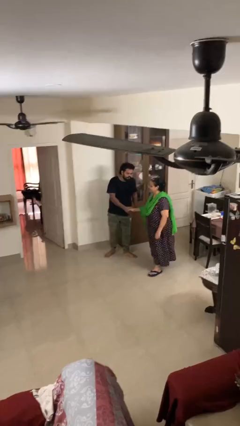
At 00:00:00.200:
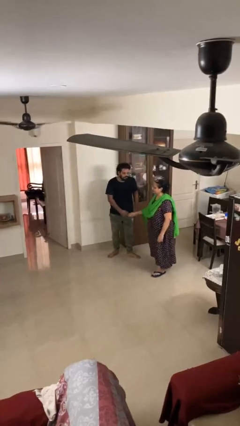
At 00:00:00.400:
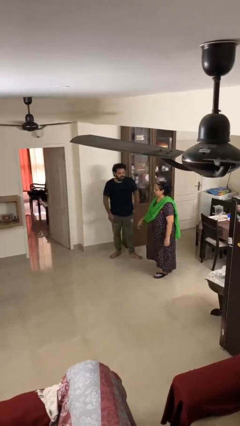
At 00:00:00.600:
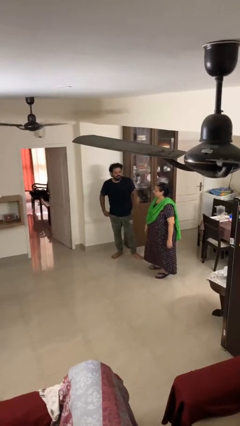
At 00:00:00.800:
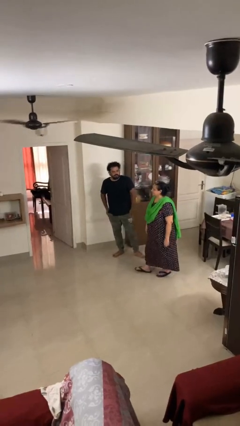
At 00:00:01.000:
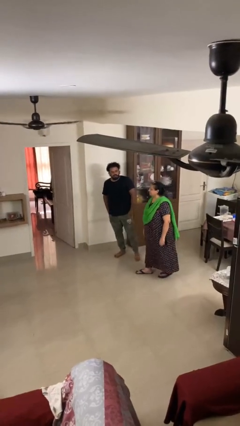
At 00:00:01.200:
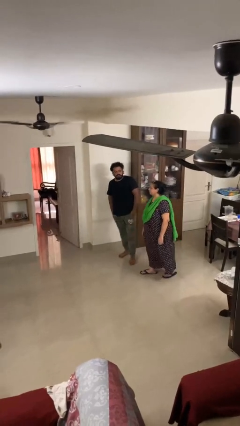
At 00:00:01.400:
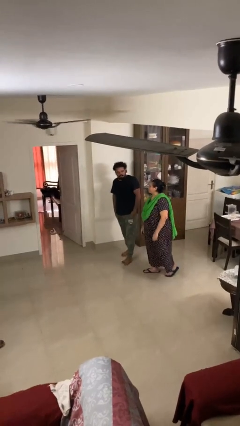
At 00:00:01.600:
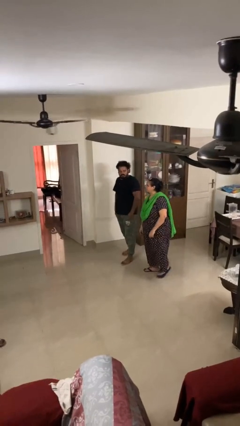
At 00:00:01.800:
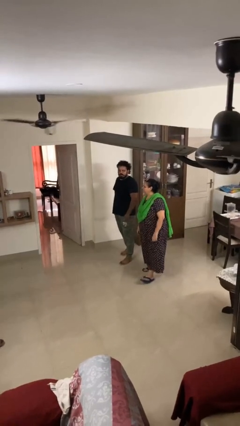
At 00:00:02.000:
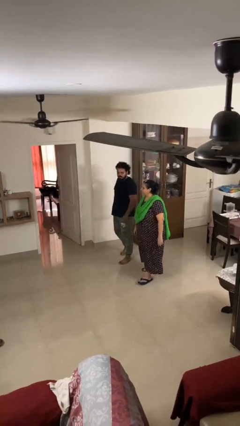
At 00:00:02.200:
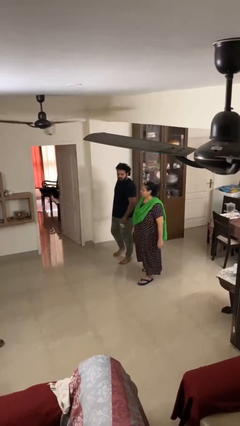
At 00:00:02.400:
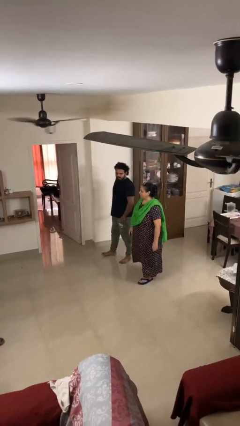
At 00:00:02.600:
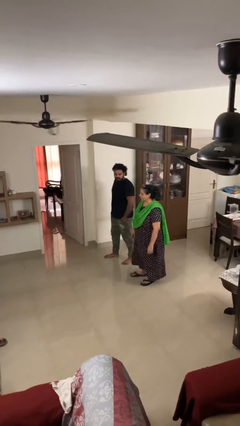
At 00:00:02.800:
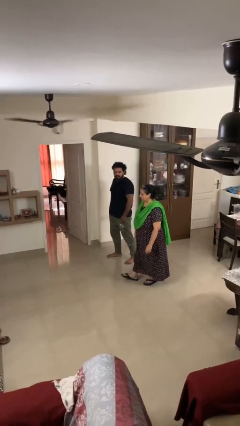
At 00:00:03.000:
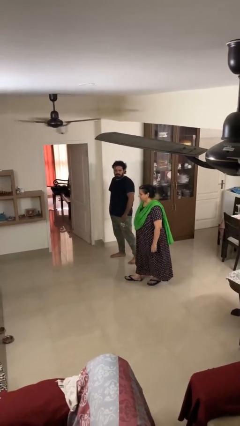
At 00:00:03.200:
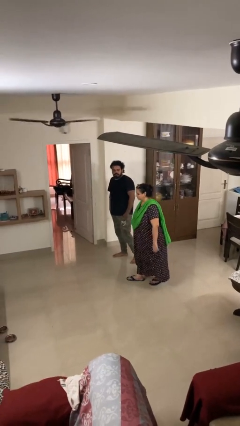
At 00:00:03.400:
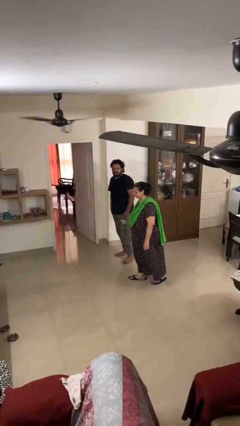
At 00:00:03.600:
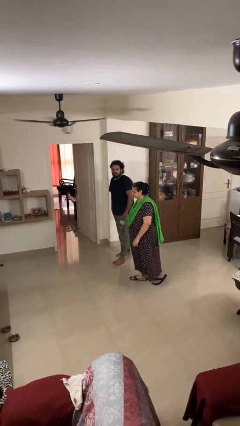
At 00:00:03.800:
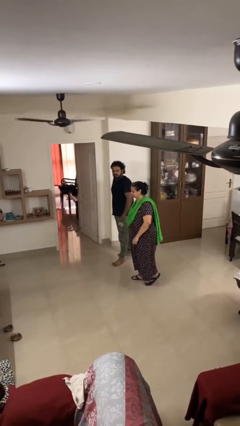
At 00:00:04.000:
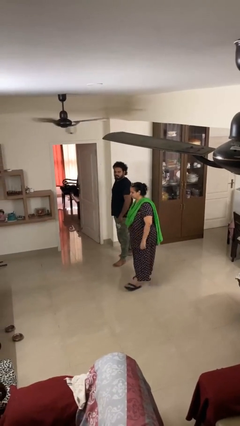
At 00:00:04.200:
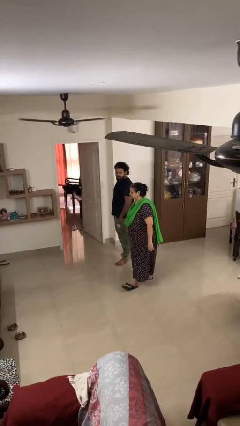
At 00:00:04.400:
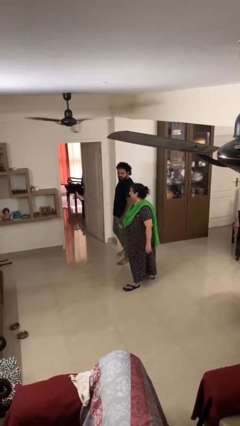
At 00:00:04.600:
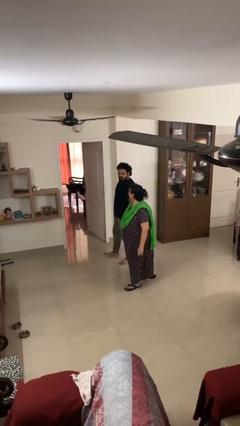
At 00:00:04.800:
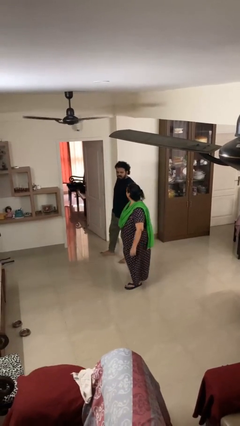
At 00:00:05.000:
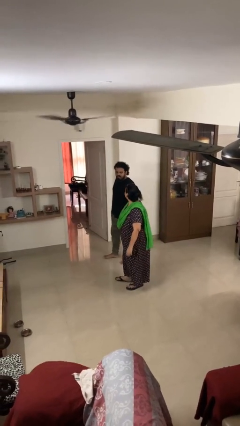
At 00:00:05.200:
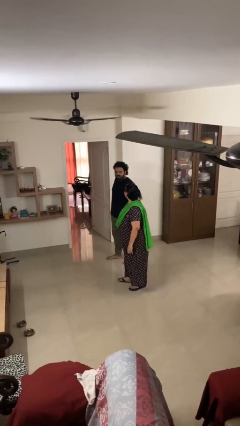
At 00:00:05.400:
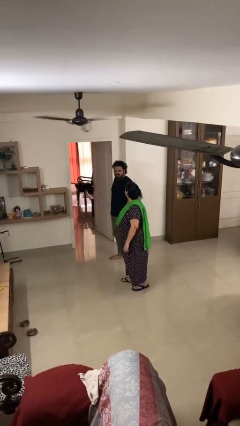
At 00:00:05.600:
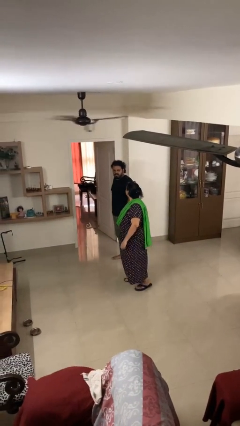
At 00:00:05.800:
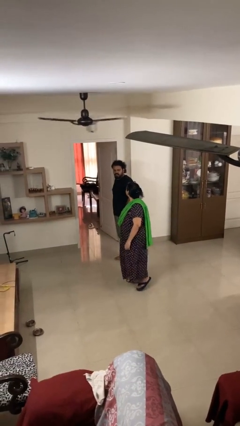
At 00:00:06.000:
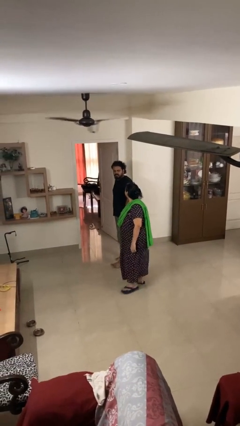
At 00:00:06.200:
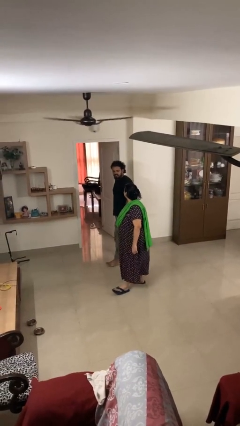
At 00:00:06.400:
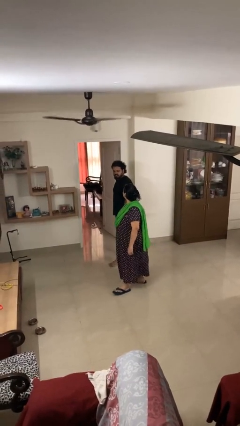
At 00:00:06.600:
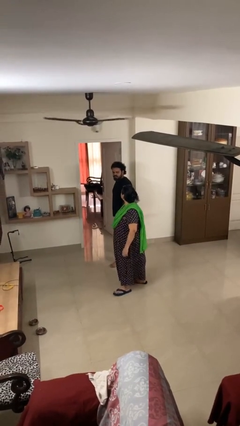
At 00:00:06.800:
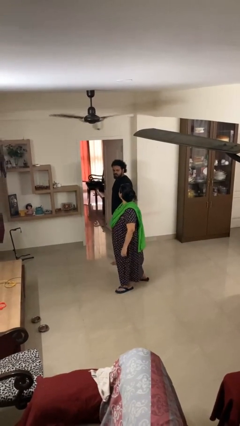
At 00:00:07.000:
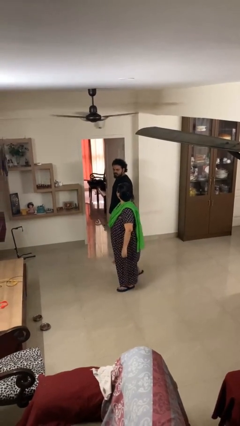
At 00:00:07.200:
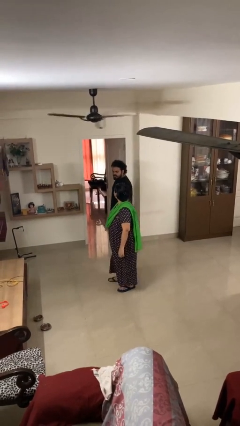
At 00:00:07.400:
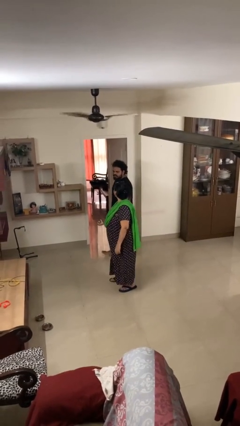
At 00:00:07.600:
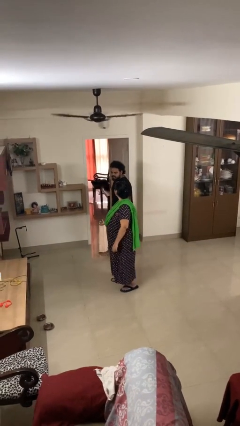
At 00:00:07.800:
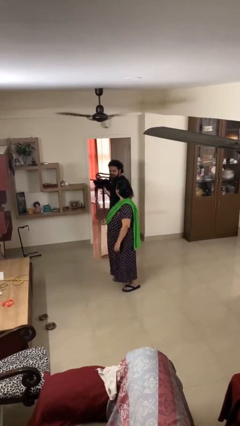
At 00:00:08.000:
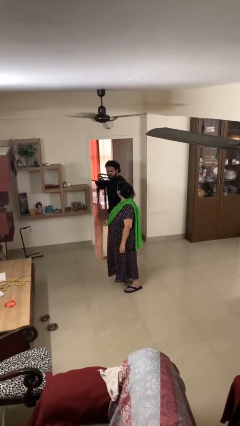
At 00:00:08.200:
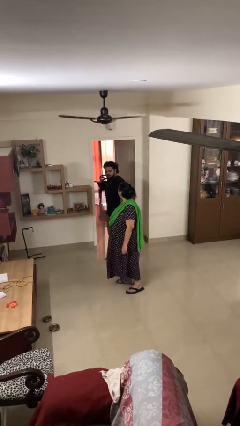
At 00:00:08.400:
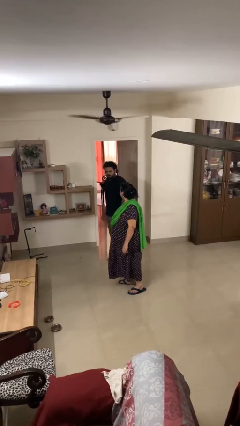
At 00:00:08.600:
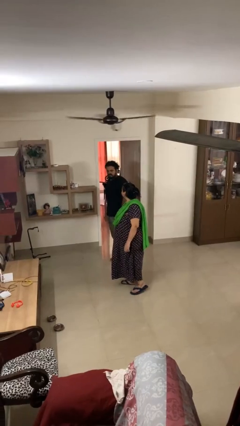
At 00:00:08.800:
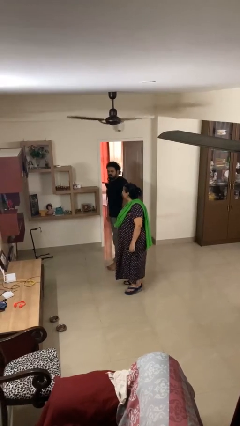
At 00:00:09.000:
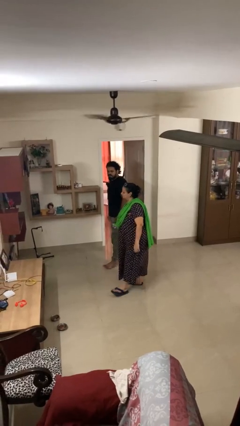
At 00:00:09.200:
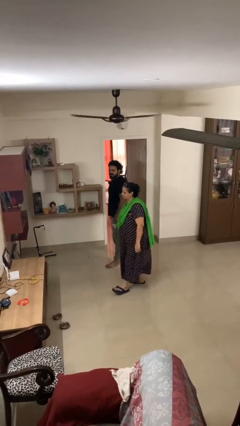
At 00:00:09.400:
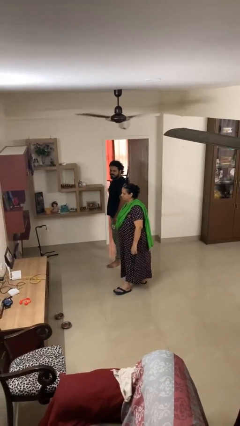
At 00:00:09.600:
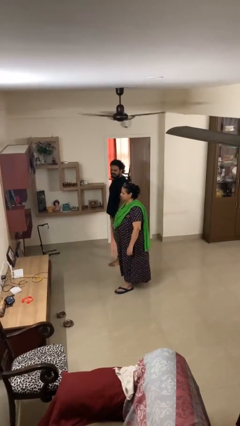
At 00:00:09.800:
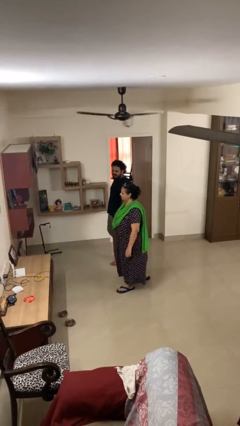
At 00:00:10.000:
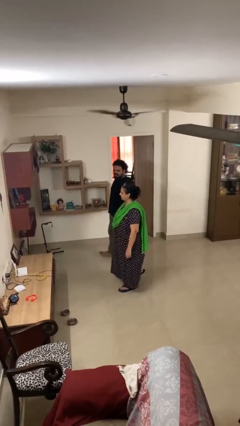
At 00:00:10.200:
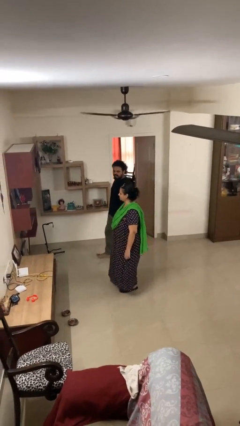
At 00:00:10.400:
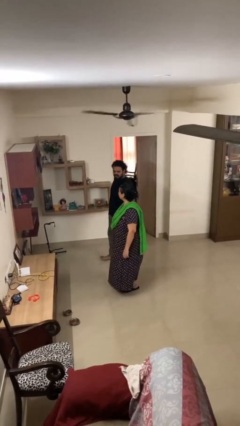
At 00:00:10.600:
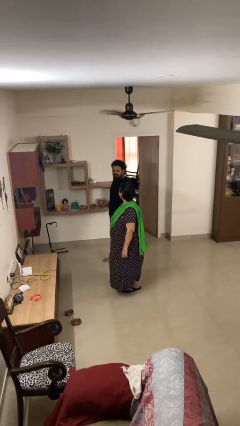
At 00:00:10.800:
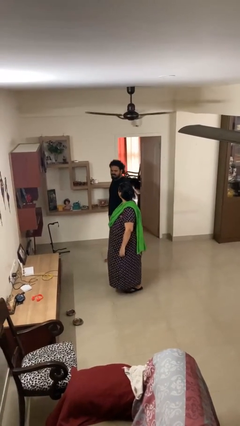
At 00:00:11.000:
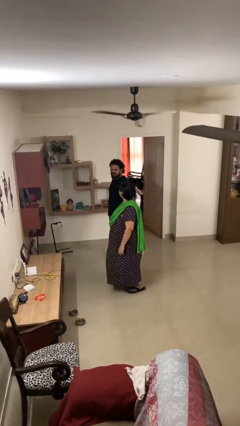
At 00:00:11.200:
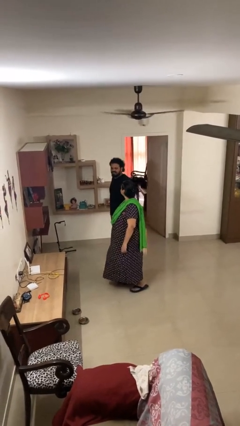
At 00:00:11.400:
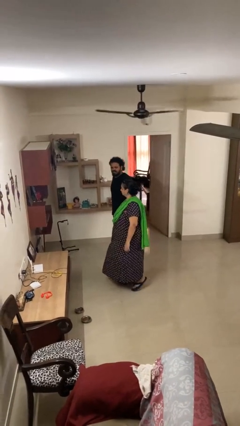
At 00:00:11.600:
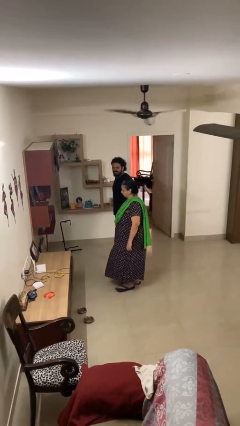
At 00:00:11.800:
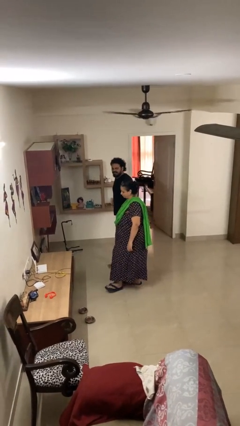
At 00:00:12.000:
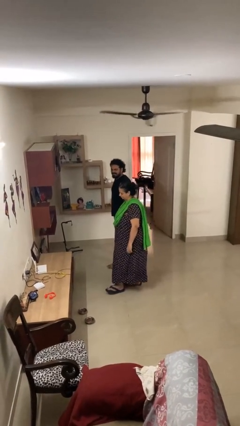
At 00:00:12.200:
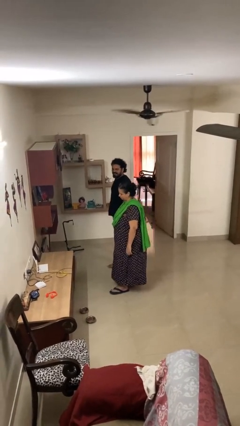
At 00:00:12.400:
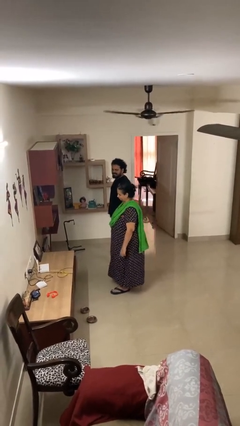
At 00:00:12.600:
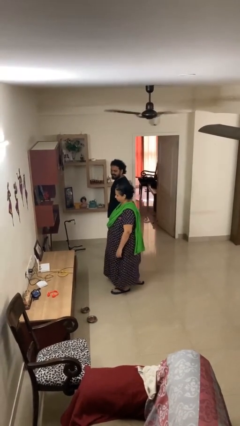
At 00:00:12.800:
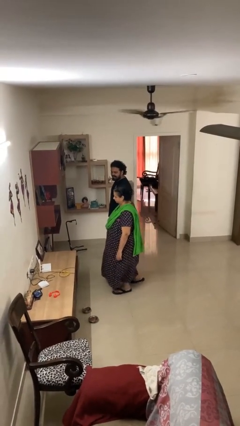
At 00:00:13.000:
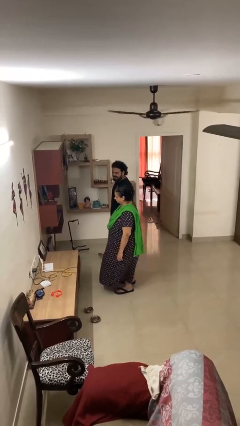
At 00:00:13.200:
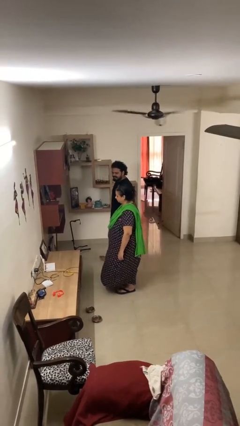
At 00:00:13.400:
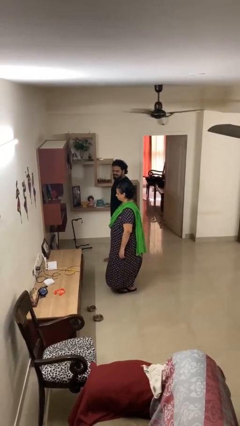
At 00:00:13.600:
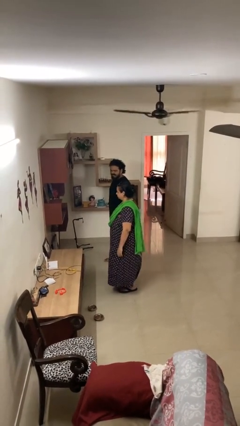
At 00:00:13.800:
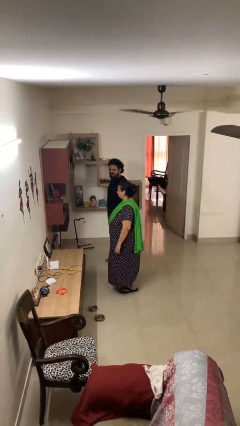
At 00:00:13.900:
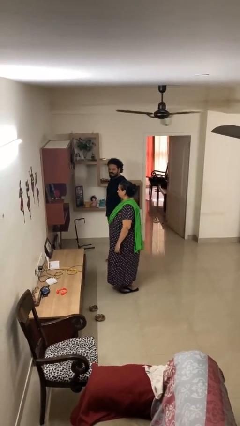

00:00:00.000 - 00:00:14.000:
person talks to person

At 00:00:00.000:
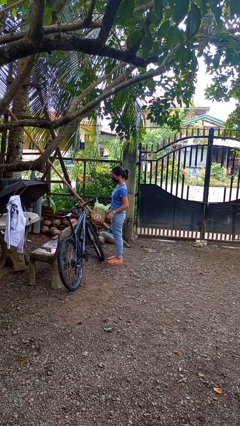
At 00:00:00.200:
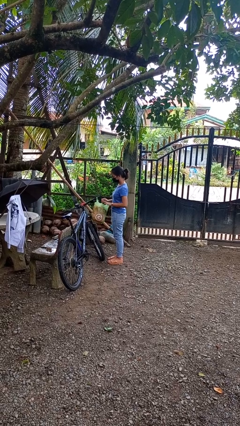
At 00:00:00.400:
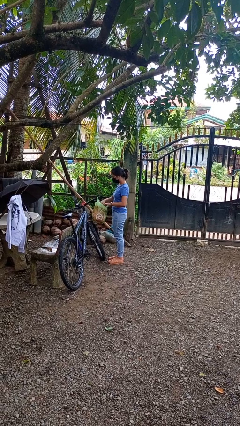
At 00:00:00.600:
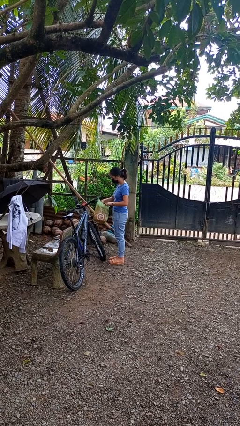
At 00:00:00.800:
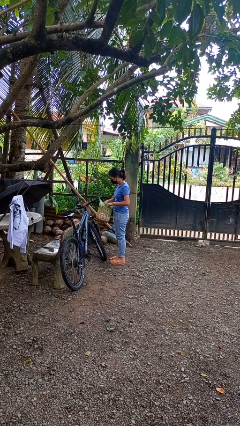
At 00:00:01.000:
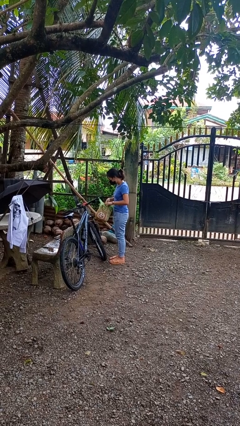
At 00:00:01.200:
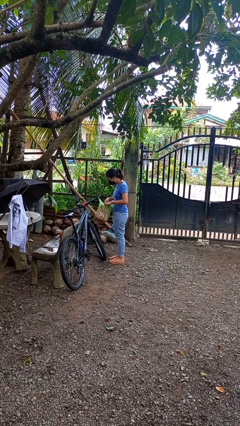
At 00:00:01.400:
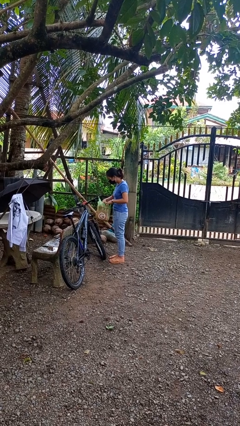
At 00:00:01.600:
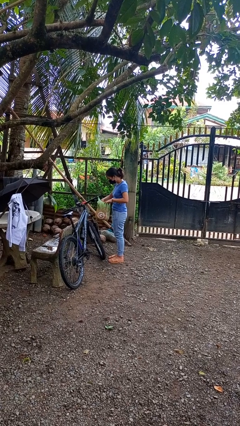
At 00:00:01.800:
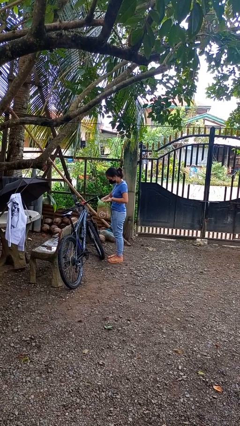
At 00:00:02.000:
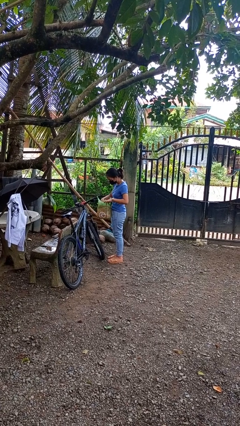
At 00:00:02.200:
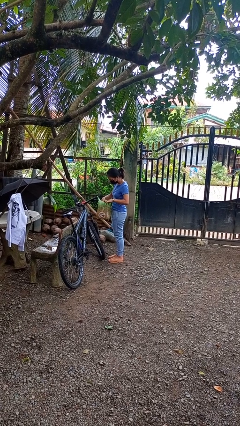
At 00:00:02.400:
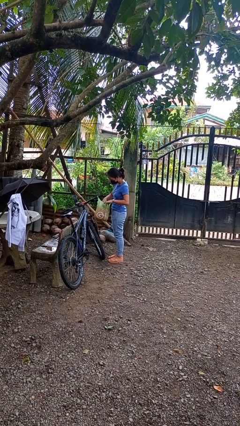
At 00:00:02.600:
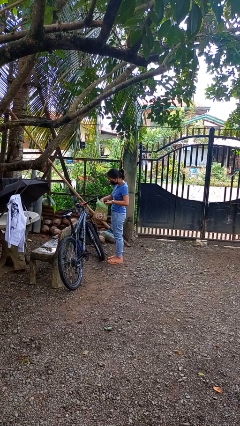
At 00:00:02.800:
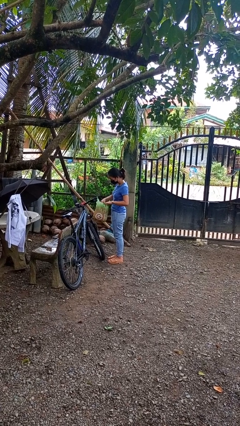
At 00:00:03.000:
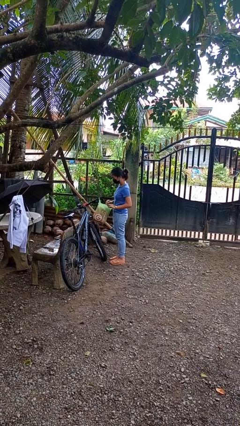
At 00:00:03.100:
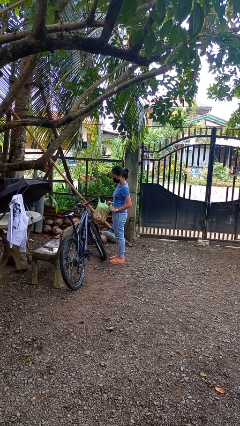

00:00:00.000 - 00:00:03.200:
person searches in bag

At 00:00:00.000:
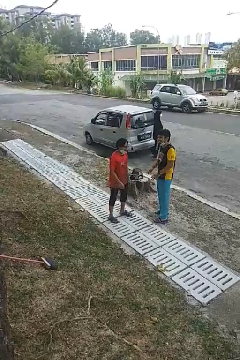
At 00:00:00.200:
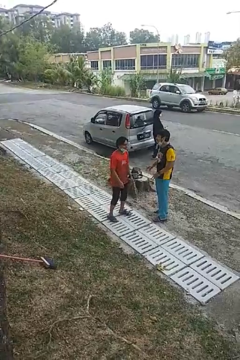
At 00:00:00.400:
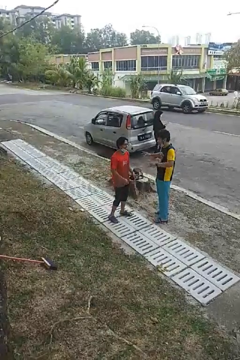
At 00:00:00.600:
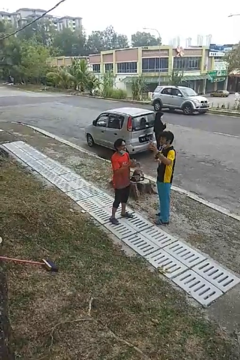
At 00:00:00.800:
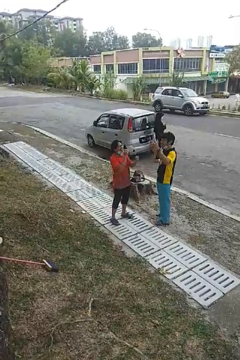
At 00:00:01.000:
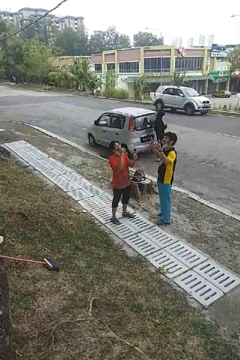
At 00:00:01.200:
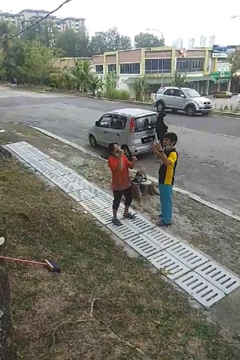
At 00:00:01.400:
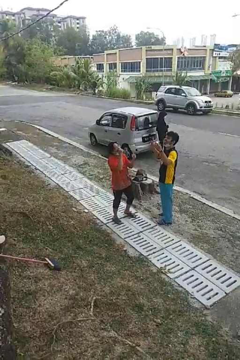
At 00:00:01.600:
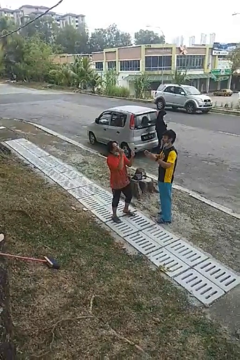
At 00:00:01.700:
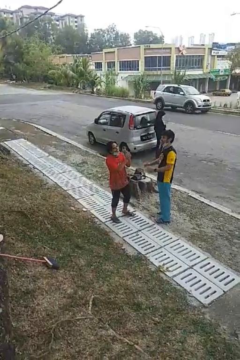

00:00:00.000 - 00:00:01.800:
person laughs with person
